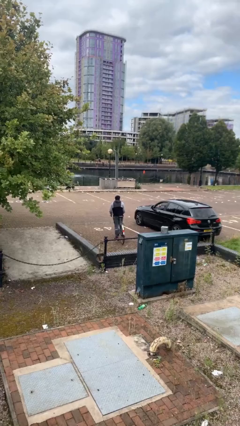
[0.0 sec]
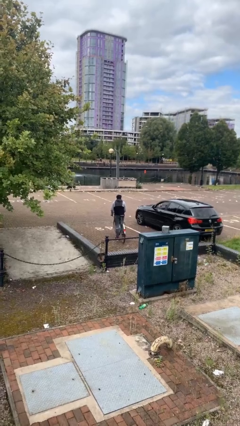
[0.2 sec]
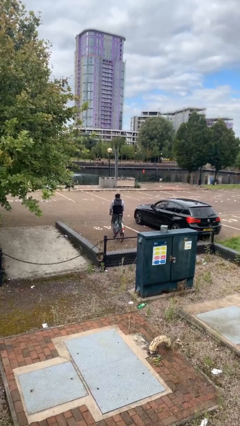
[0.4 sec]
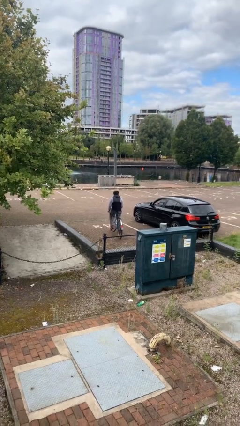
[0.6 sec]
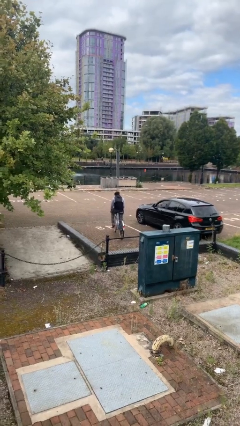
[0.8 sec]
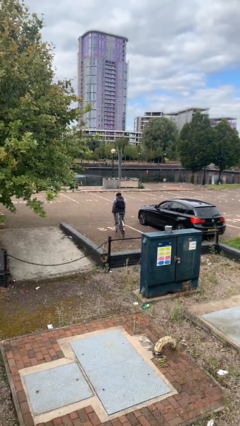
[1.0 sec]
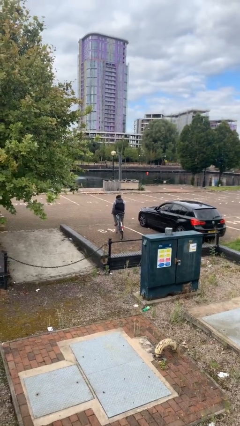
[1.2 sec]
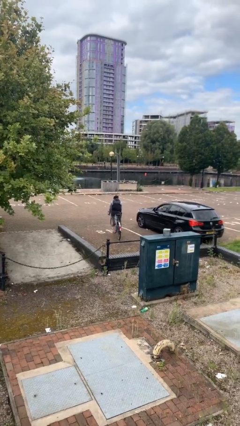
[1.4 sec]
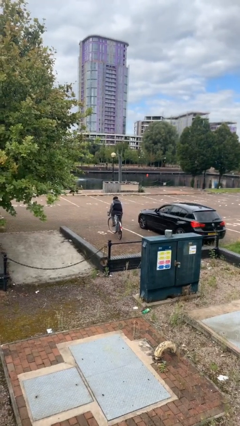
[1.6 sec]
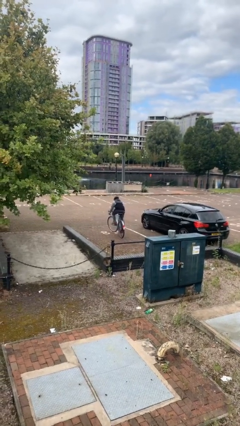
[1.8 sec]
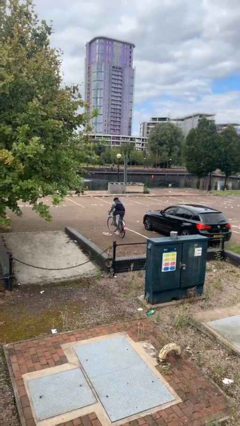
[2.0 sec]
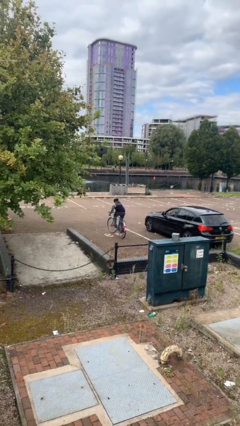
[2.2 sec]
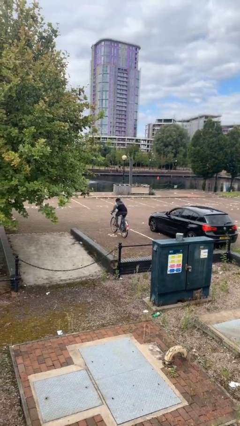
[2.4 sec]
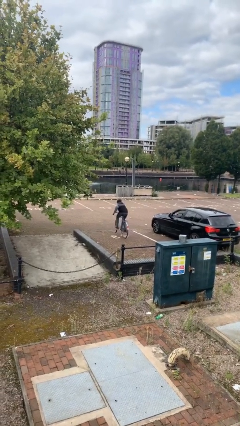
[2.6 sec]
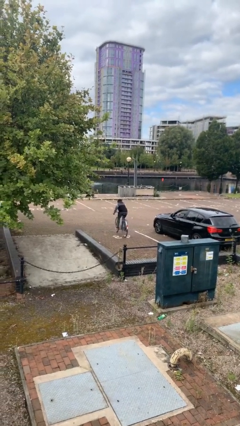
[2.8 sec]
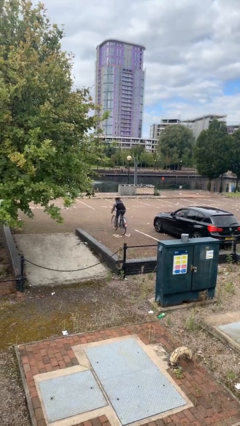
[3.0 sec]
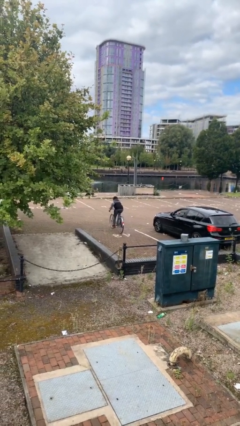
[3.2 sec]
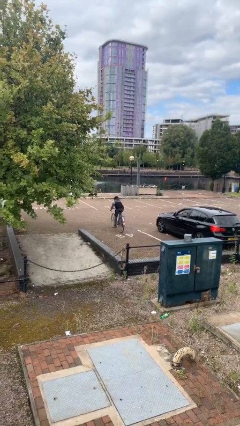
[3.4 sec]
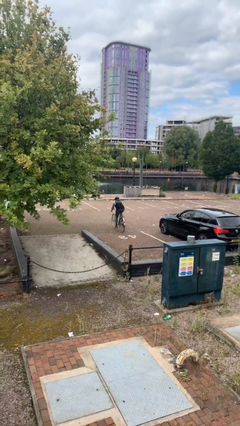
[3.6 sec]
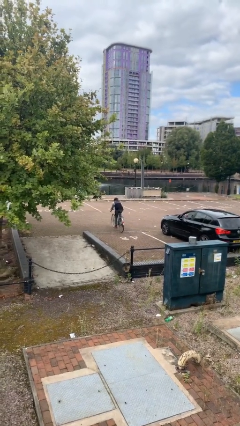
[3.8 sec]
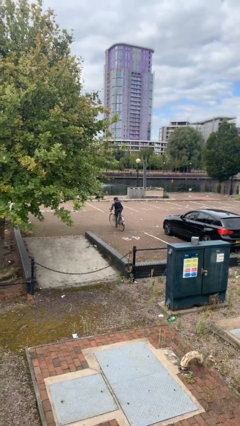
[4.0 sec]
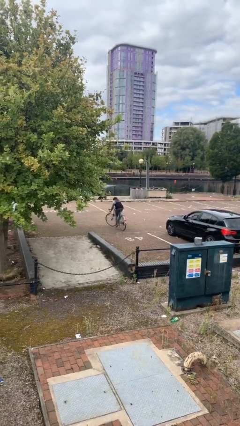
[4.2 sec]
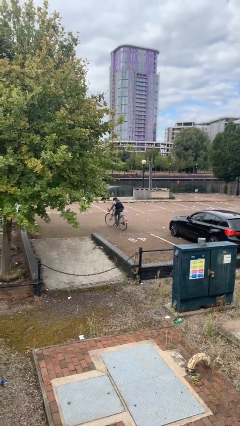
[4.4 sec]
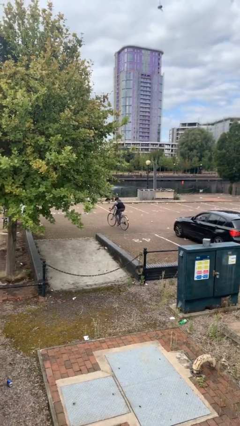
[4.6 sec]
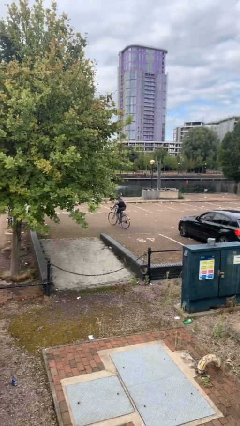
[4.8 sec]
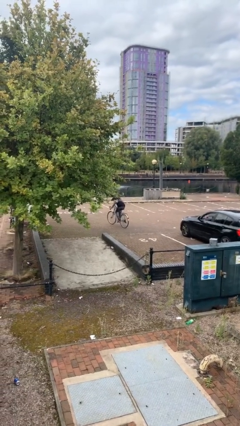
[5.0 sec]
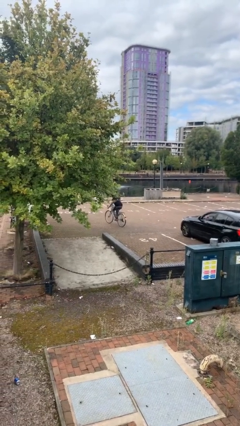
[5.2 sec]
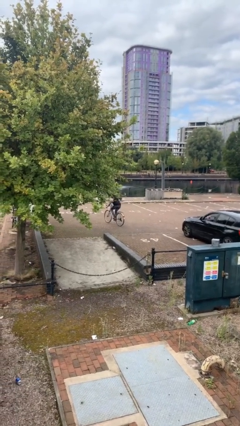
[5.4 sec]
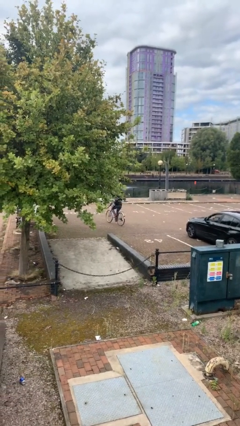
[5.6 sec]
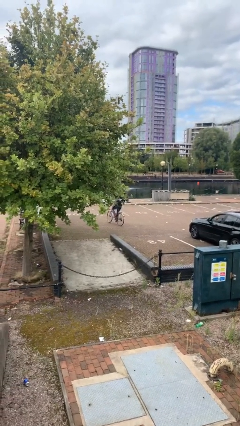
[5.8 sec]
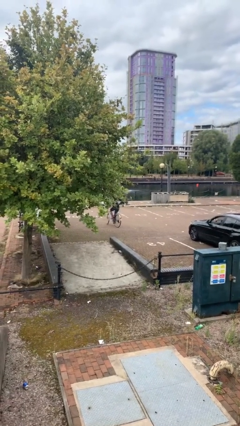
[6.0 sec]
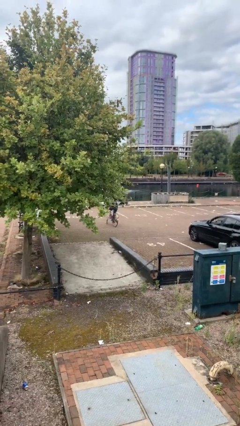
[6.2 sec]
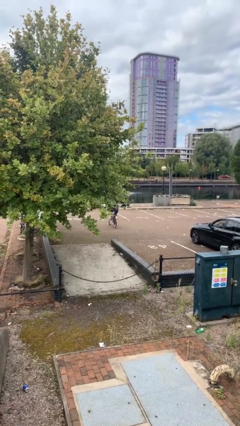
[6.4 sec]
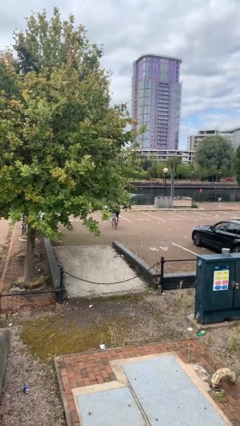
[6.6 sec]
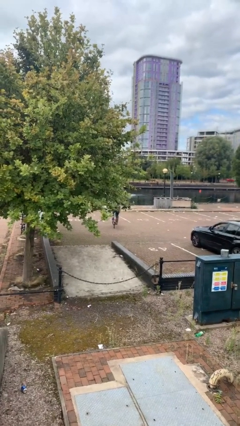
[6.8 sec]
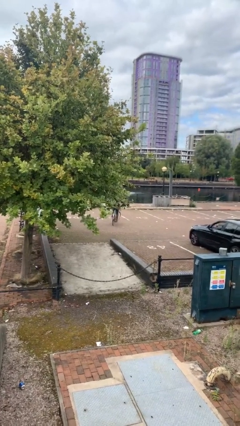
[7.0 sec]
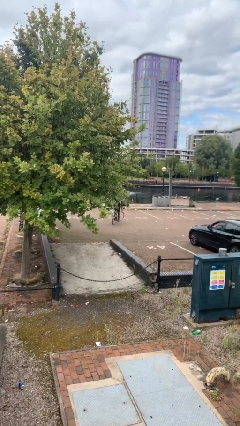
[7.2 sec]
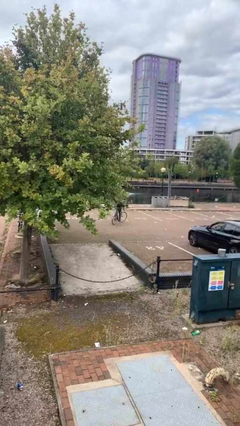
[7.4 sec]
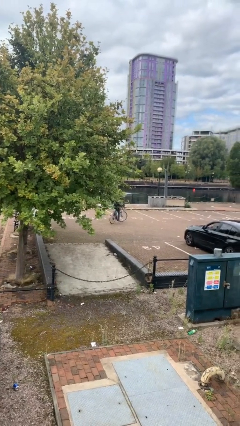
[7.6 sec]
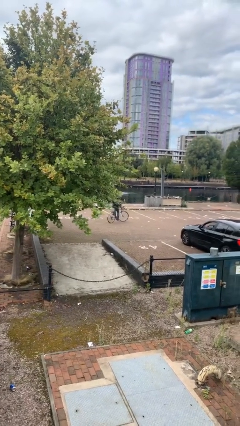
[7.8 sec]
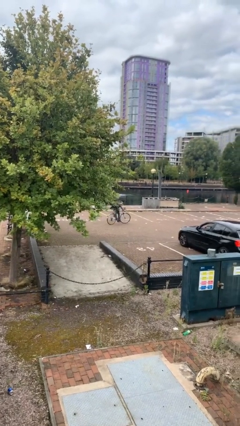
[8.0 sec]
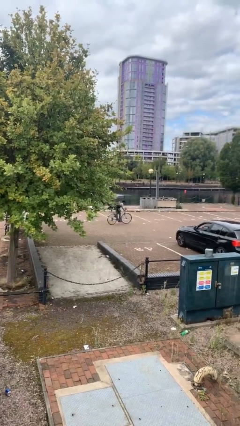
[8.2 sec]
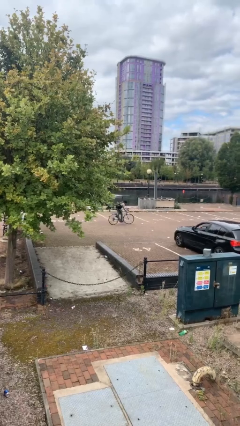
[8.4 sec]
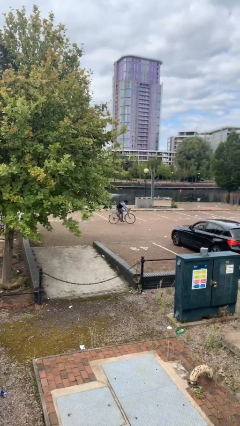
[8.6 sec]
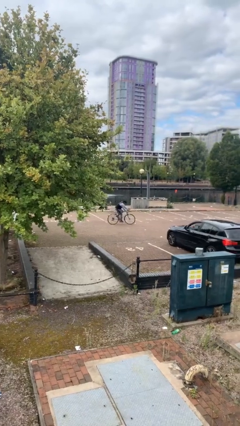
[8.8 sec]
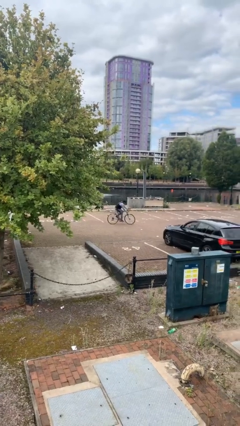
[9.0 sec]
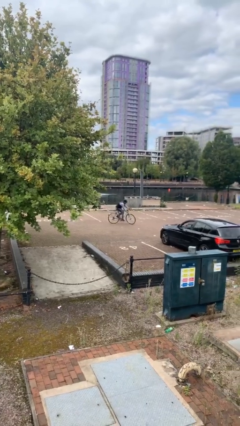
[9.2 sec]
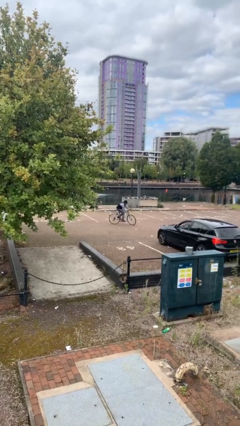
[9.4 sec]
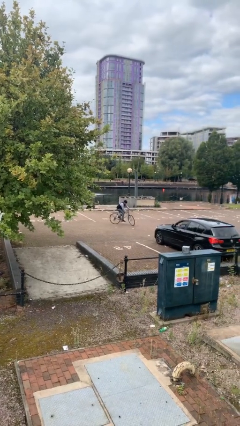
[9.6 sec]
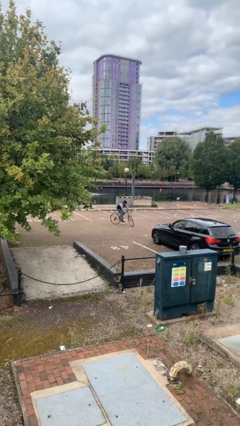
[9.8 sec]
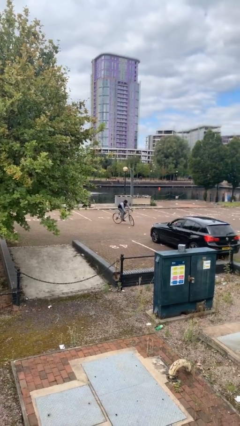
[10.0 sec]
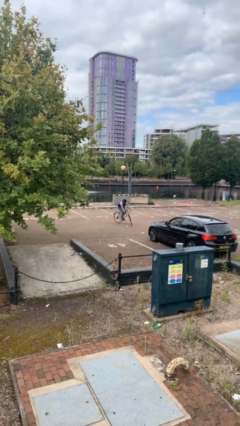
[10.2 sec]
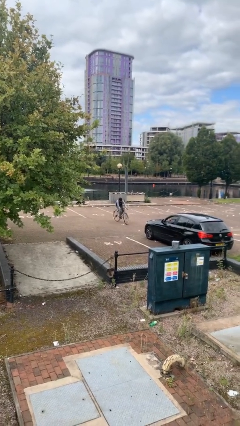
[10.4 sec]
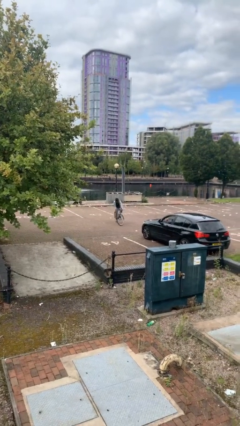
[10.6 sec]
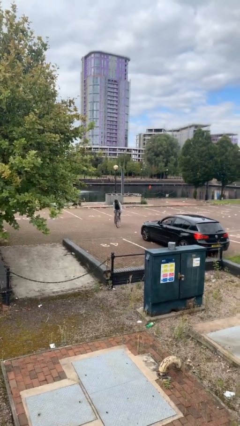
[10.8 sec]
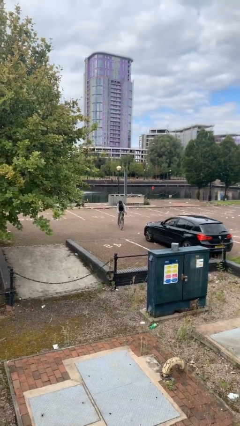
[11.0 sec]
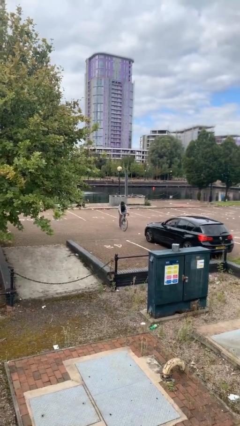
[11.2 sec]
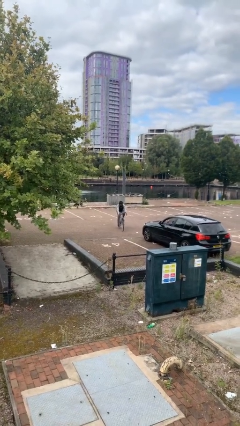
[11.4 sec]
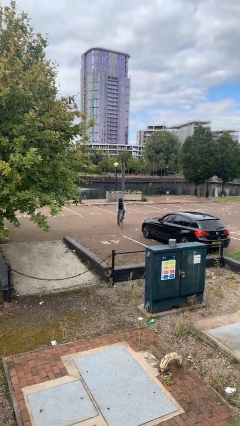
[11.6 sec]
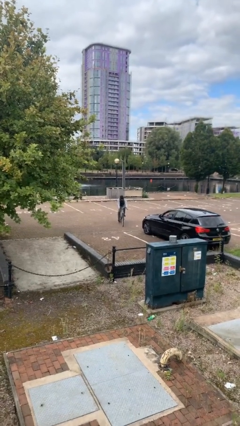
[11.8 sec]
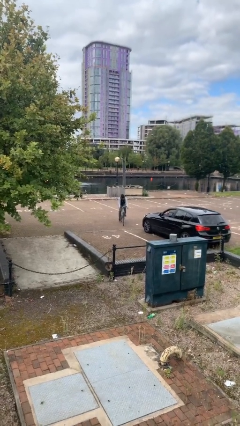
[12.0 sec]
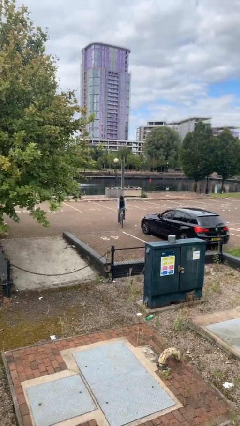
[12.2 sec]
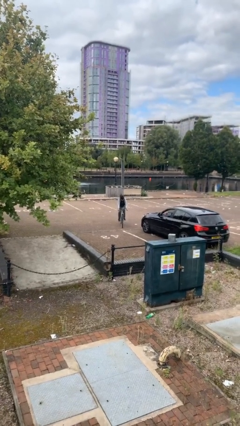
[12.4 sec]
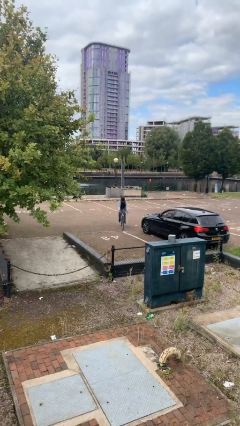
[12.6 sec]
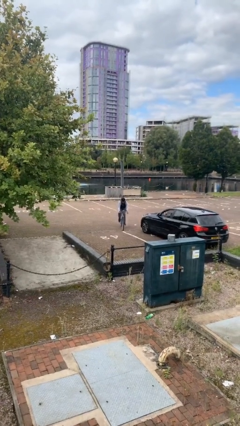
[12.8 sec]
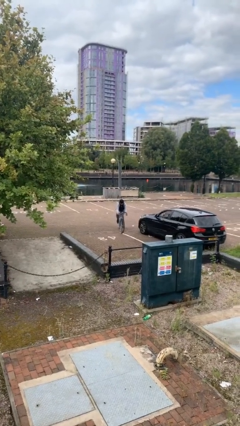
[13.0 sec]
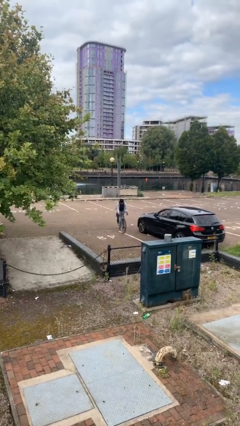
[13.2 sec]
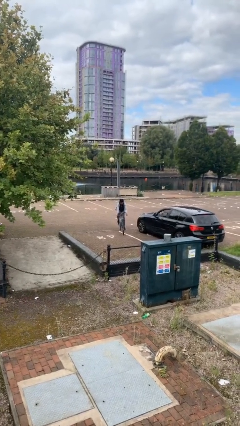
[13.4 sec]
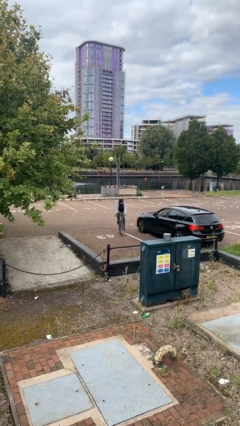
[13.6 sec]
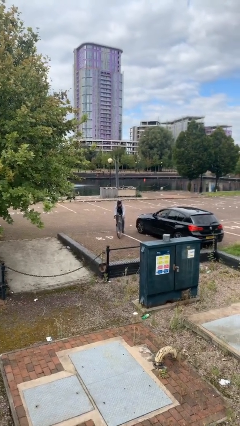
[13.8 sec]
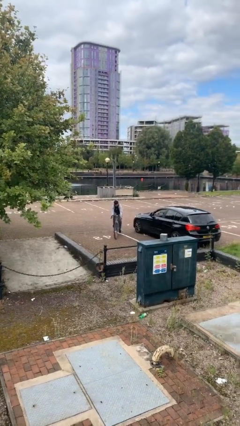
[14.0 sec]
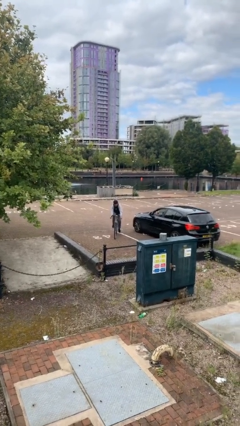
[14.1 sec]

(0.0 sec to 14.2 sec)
person rides bicycle

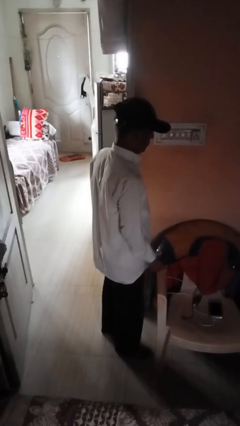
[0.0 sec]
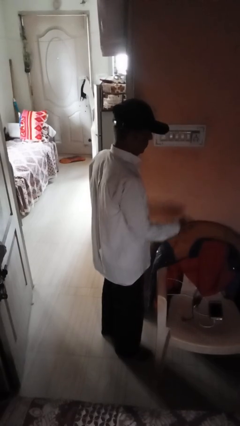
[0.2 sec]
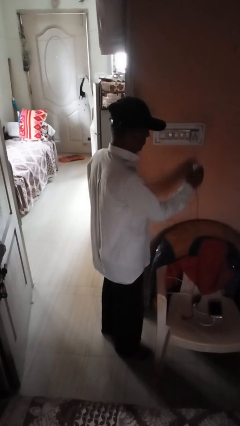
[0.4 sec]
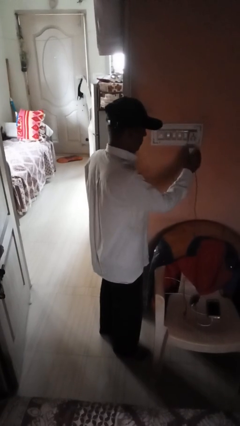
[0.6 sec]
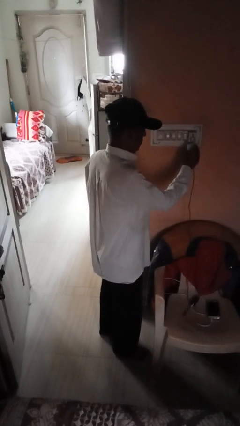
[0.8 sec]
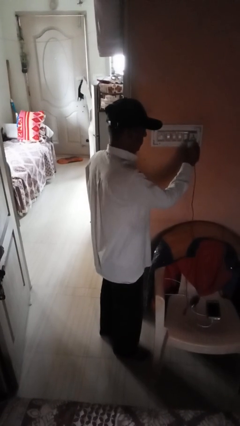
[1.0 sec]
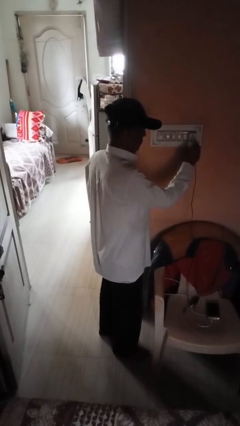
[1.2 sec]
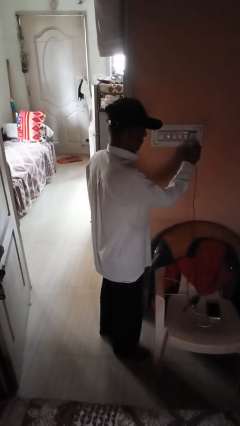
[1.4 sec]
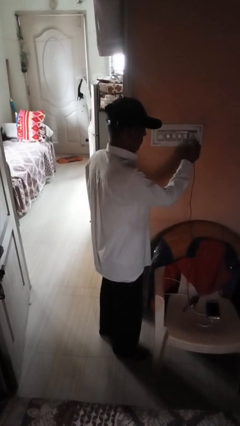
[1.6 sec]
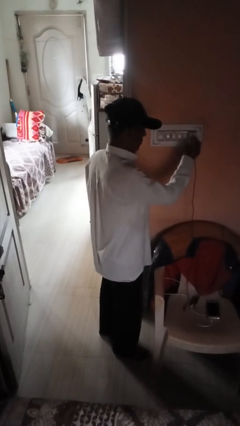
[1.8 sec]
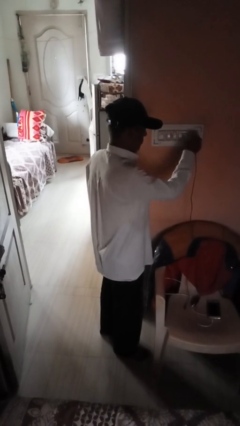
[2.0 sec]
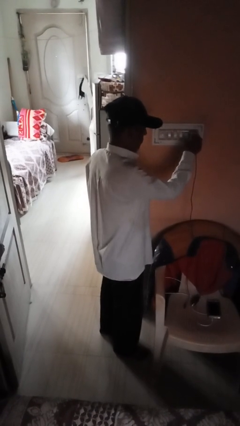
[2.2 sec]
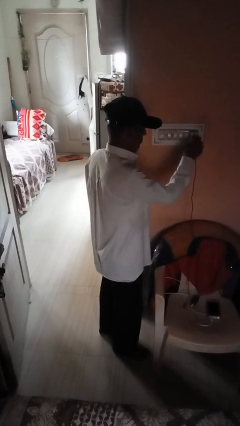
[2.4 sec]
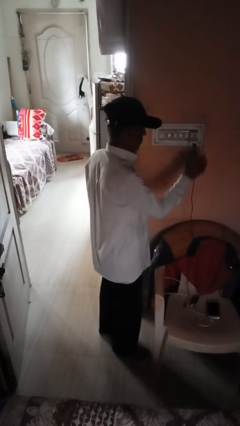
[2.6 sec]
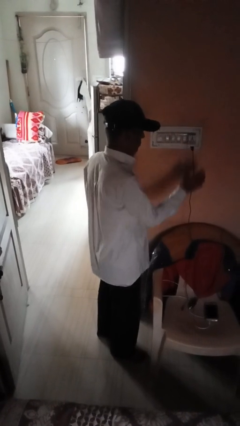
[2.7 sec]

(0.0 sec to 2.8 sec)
person plugs into electrical socket

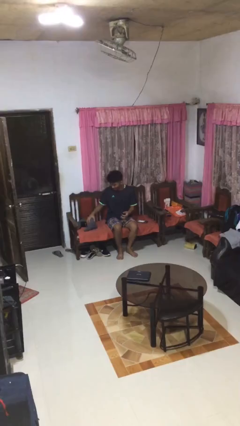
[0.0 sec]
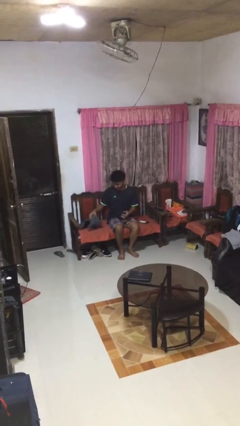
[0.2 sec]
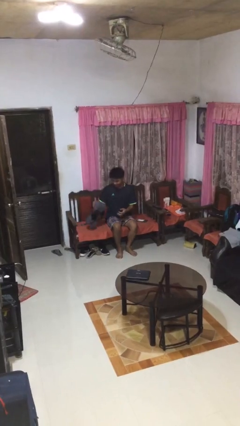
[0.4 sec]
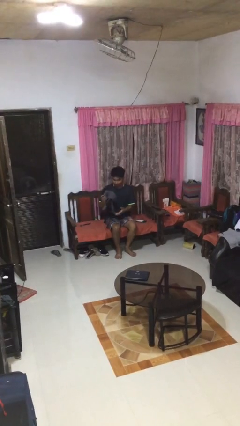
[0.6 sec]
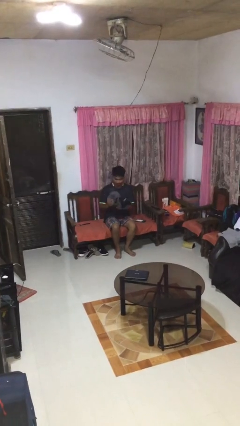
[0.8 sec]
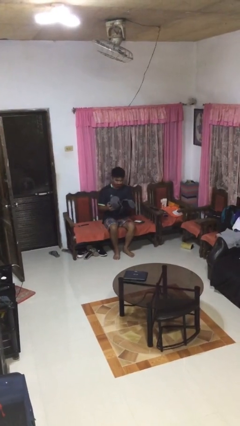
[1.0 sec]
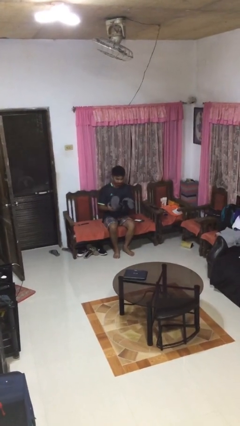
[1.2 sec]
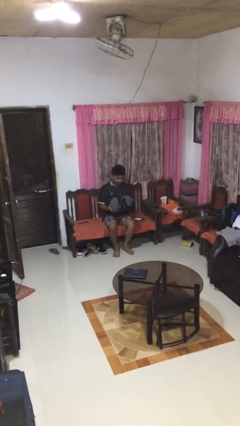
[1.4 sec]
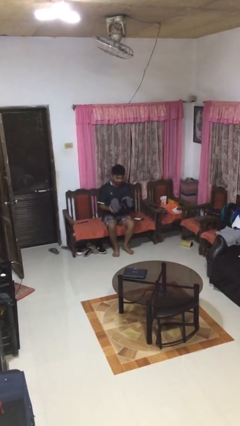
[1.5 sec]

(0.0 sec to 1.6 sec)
person picks up object from floor
